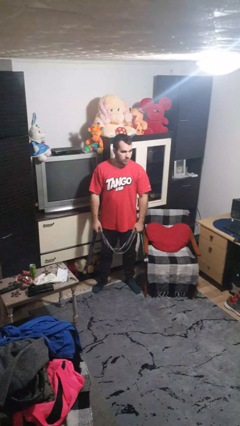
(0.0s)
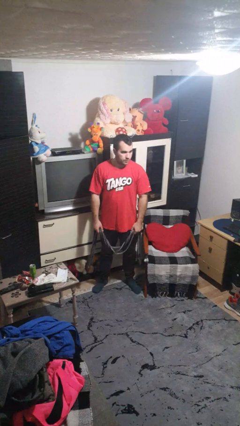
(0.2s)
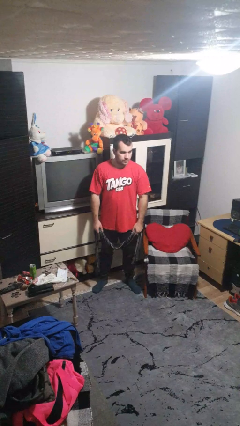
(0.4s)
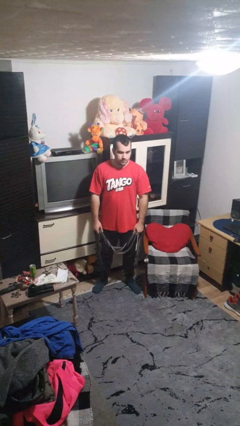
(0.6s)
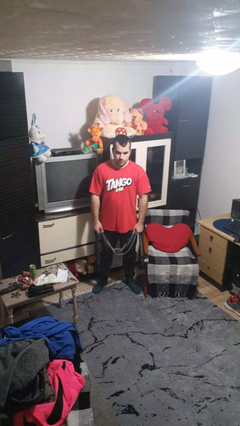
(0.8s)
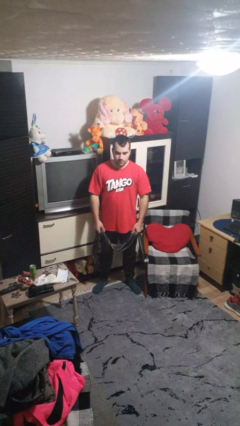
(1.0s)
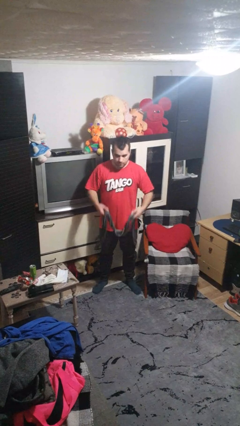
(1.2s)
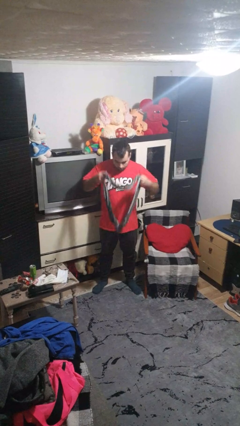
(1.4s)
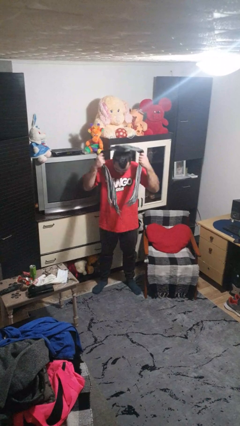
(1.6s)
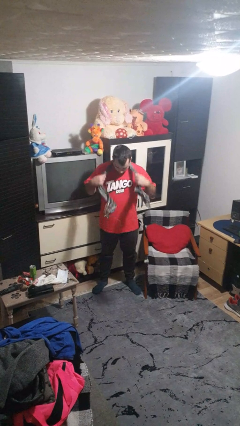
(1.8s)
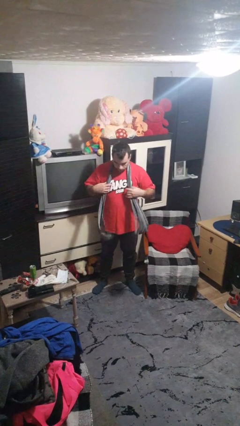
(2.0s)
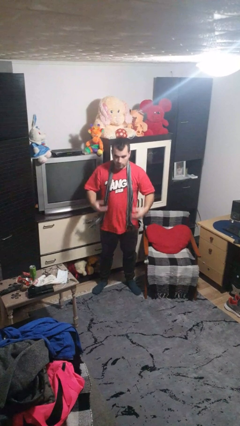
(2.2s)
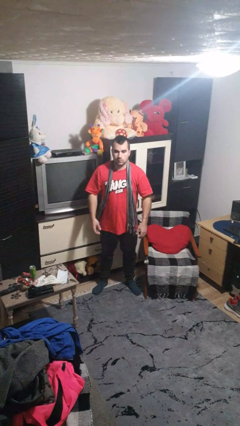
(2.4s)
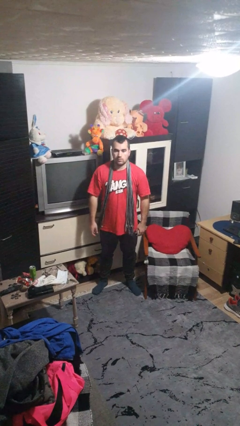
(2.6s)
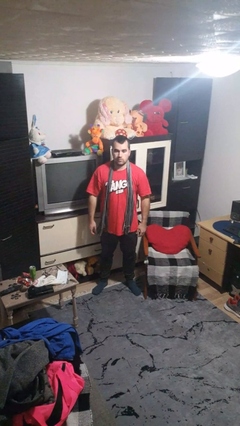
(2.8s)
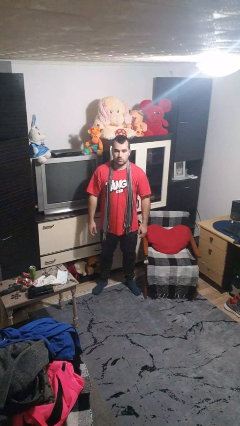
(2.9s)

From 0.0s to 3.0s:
person puts on scarf

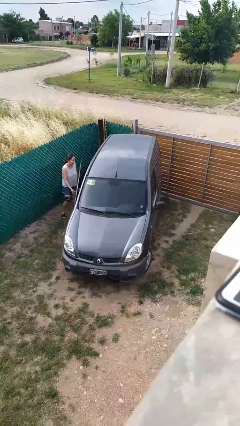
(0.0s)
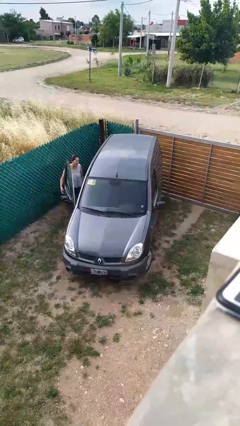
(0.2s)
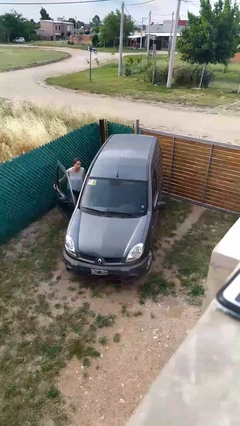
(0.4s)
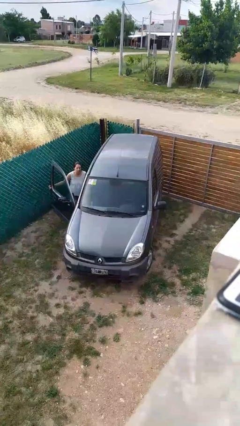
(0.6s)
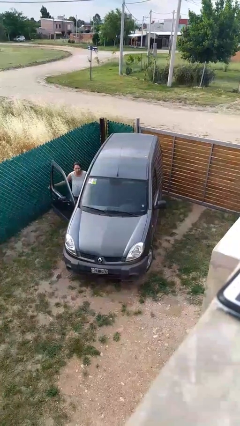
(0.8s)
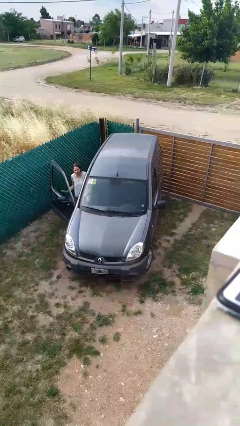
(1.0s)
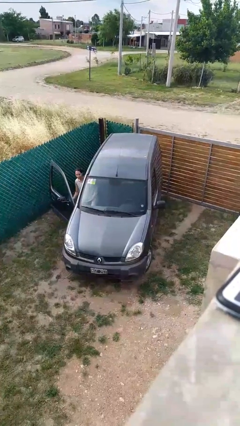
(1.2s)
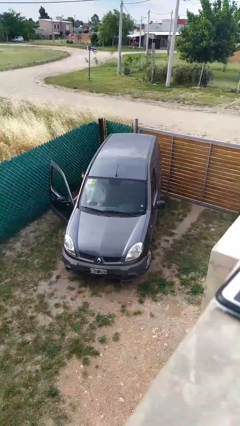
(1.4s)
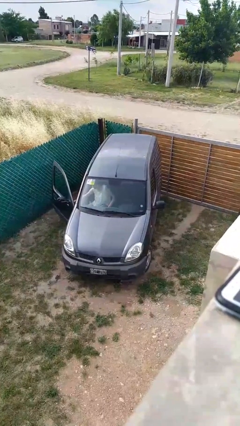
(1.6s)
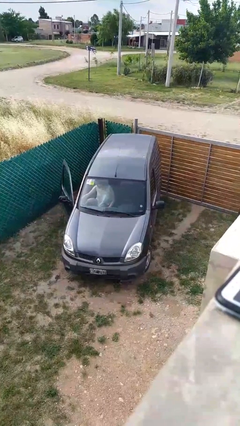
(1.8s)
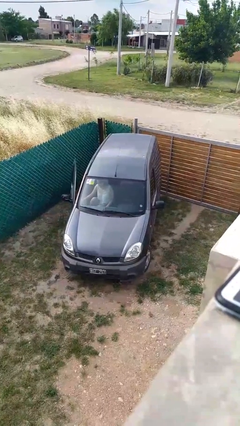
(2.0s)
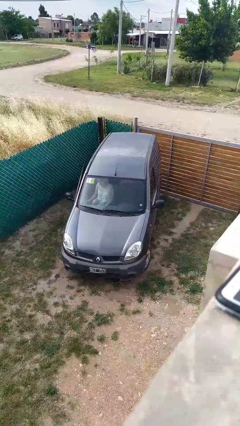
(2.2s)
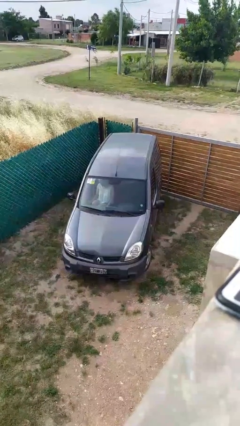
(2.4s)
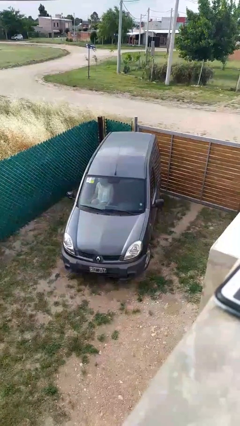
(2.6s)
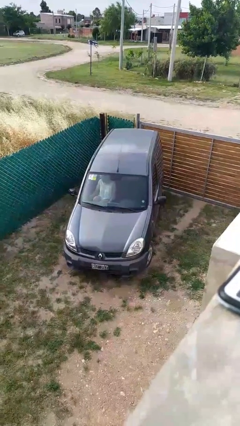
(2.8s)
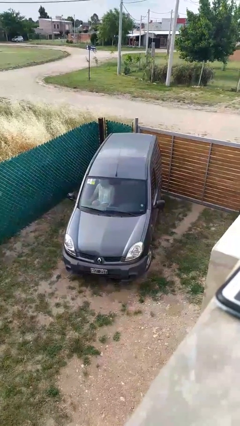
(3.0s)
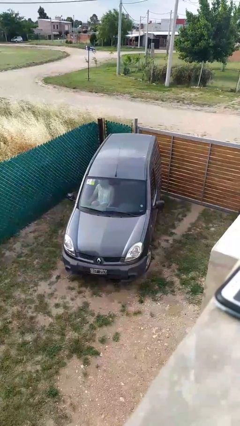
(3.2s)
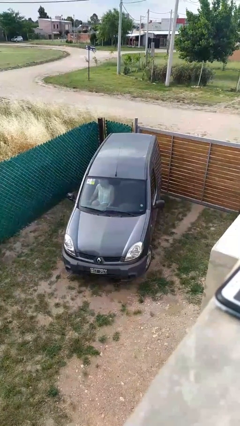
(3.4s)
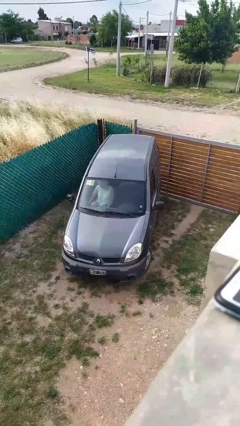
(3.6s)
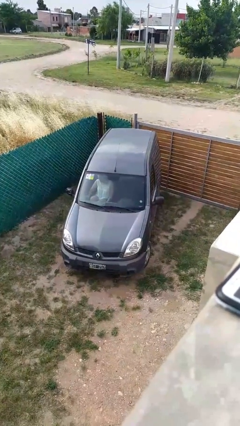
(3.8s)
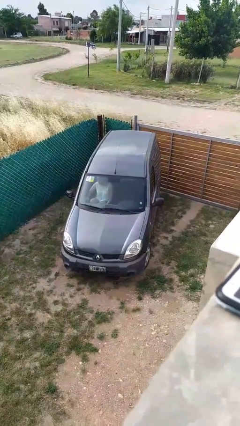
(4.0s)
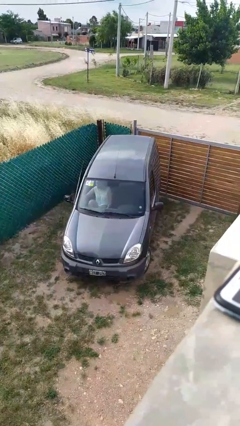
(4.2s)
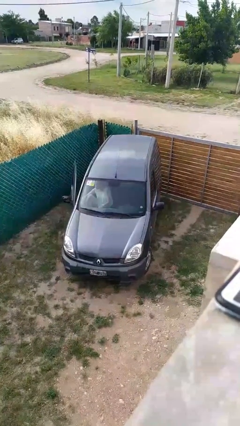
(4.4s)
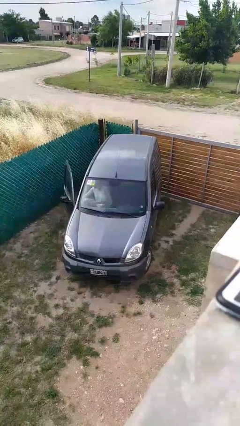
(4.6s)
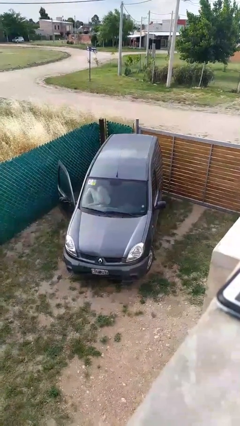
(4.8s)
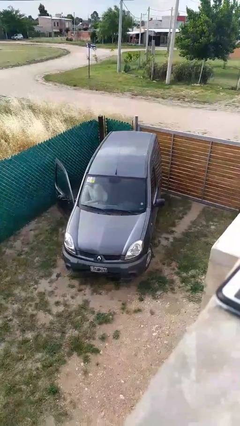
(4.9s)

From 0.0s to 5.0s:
car picks up person

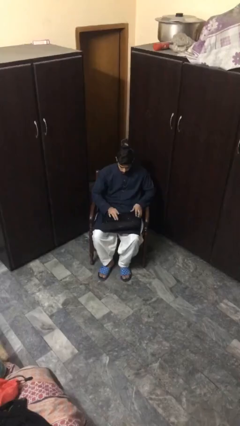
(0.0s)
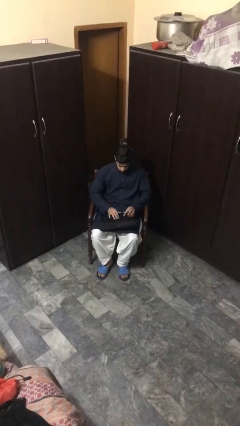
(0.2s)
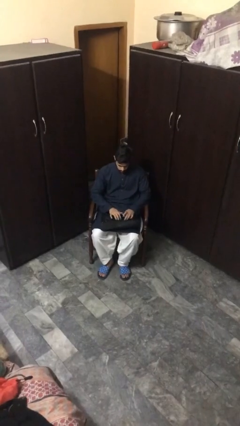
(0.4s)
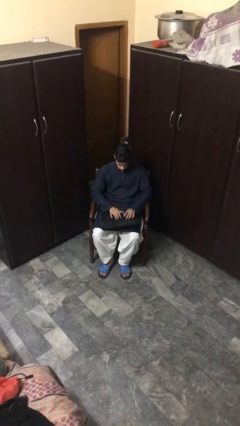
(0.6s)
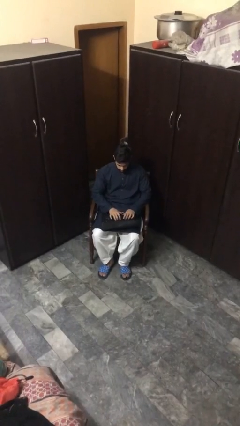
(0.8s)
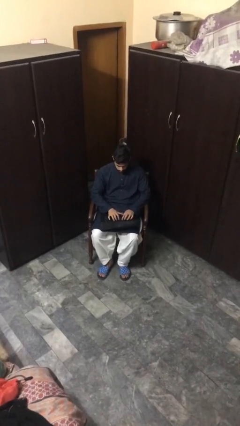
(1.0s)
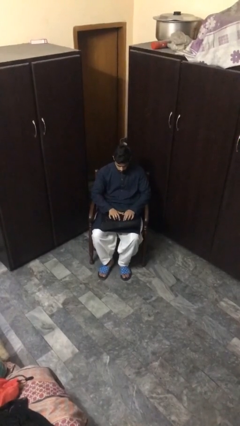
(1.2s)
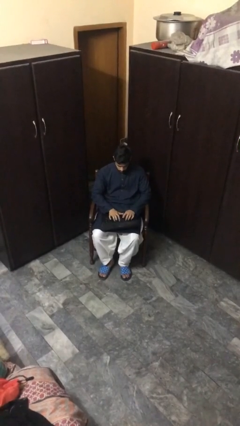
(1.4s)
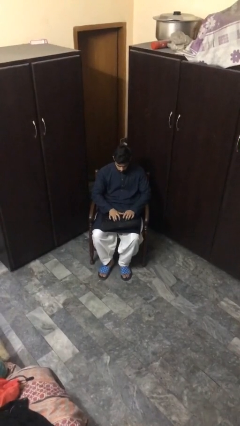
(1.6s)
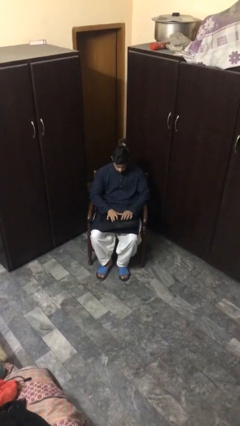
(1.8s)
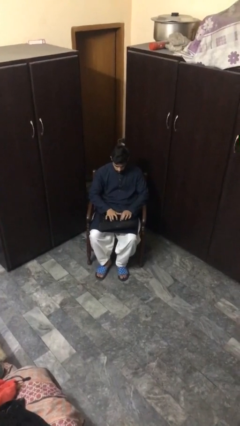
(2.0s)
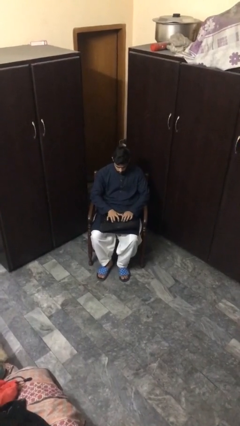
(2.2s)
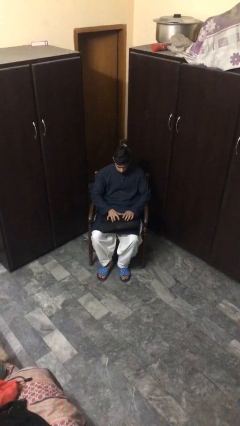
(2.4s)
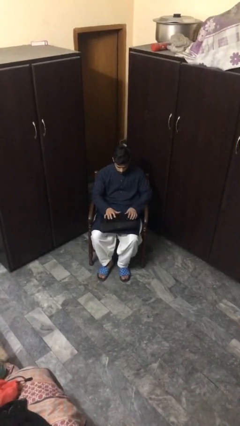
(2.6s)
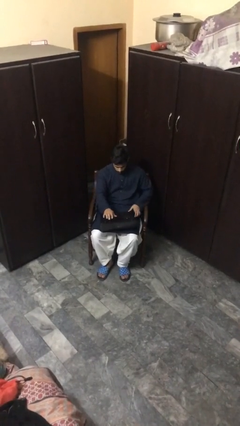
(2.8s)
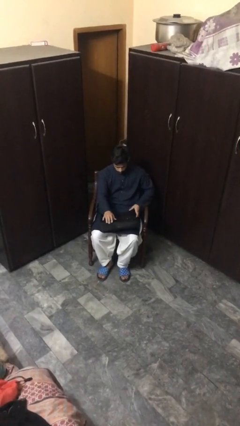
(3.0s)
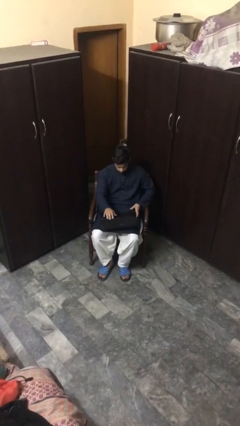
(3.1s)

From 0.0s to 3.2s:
person interacts with laptop

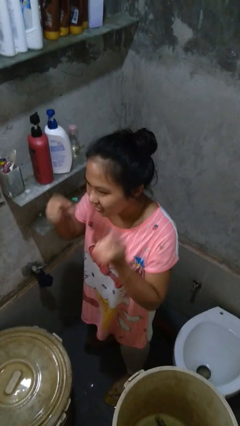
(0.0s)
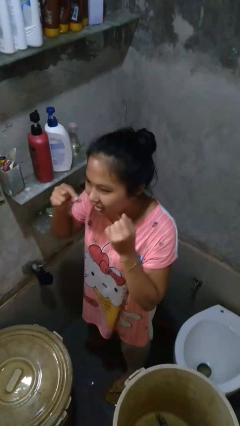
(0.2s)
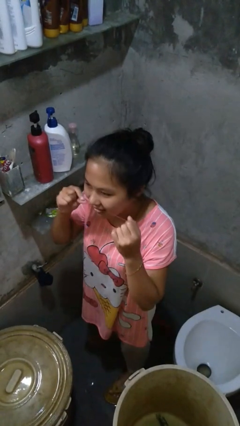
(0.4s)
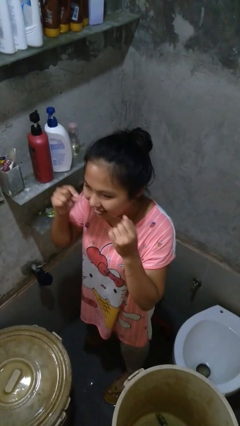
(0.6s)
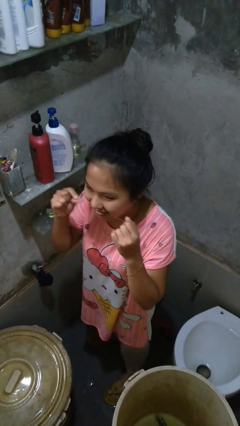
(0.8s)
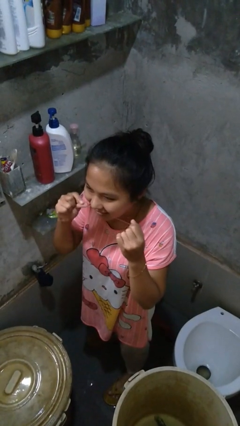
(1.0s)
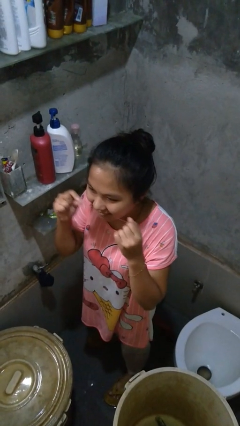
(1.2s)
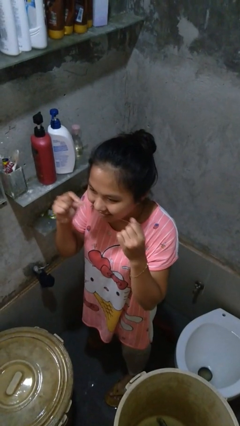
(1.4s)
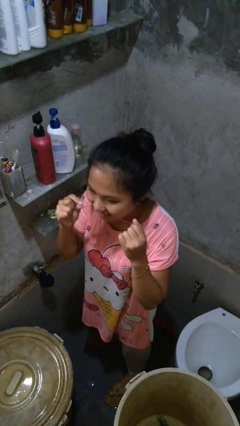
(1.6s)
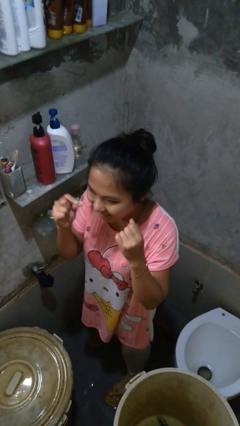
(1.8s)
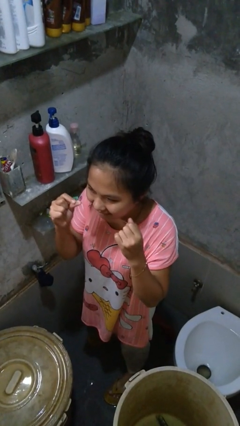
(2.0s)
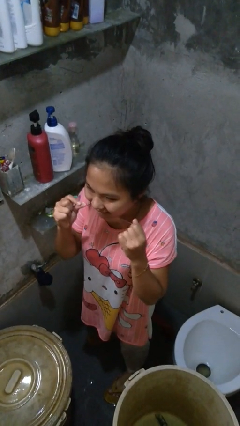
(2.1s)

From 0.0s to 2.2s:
person flosses

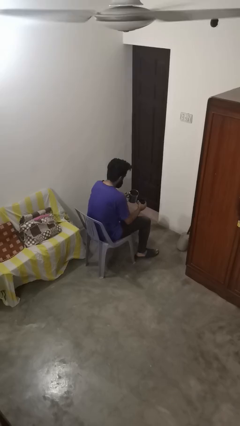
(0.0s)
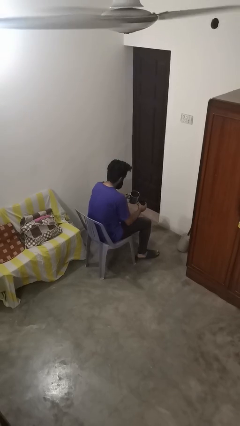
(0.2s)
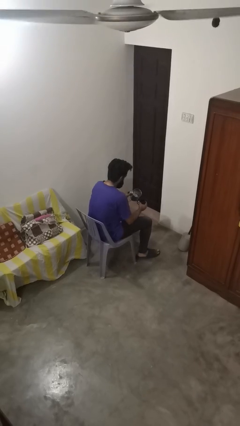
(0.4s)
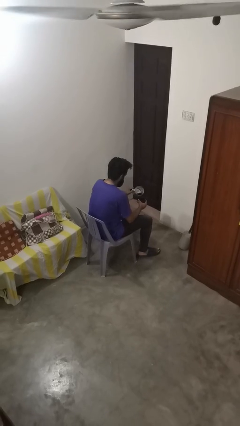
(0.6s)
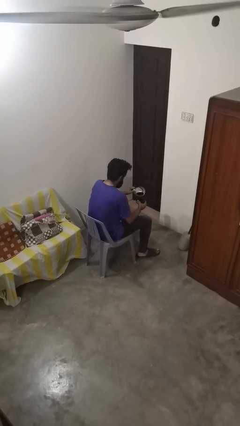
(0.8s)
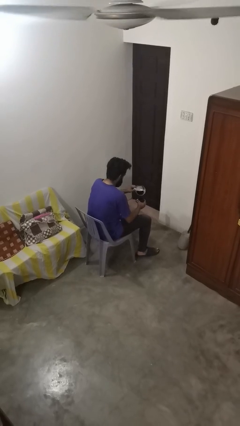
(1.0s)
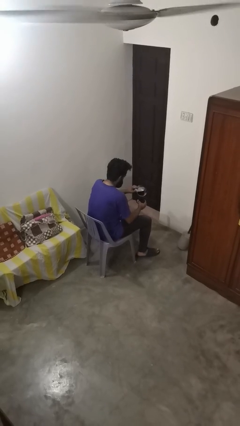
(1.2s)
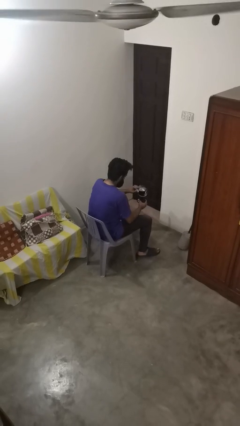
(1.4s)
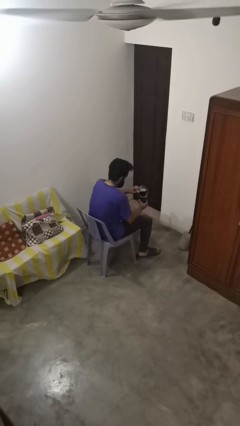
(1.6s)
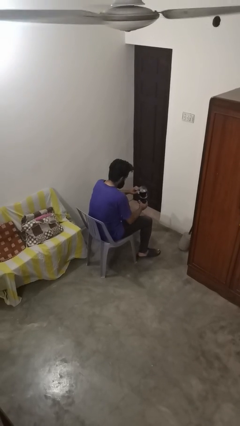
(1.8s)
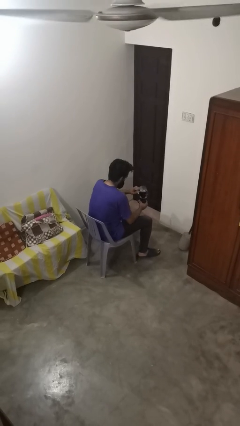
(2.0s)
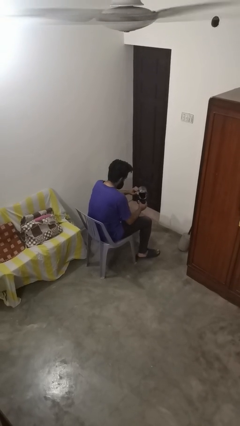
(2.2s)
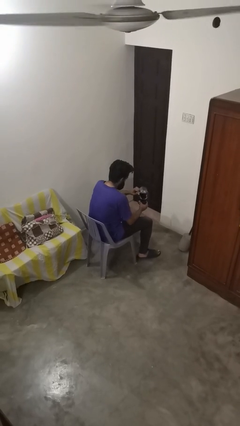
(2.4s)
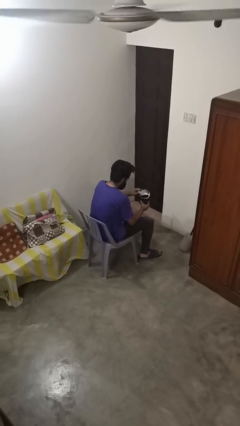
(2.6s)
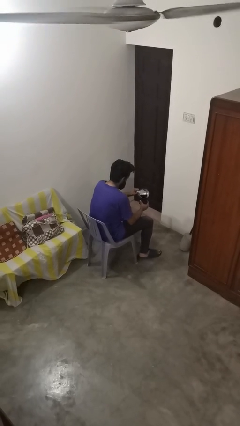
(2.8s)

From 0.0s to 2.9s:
person pours coffee into mug

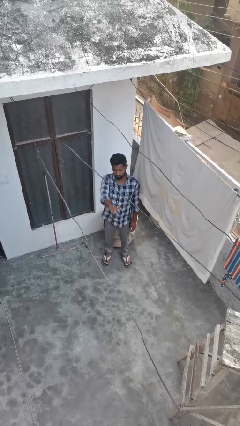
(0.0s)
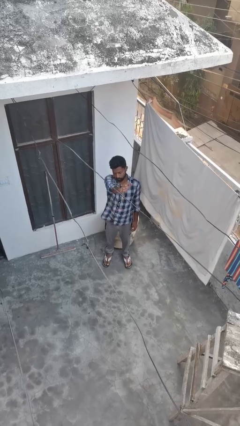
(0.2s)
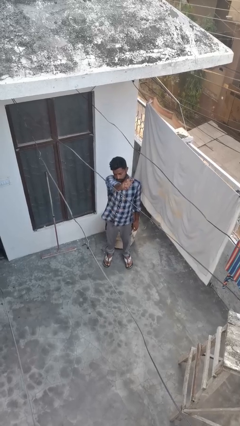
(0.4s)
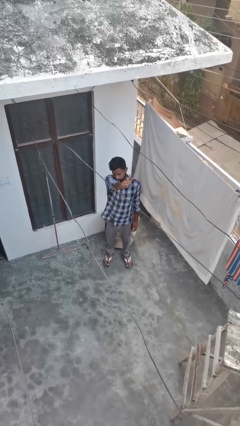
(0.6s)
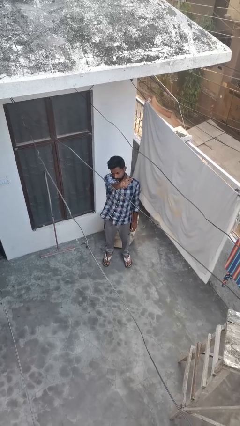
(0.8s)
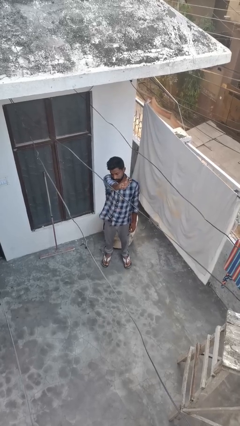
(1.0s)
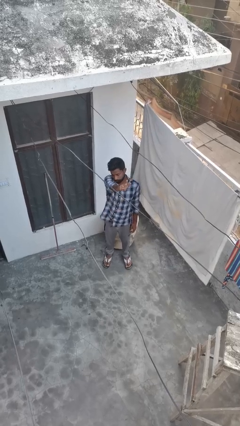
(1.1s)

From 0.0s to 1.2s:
person gestures number three

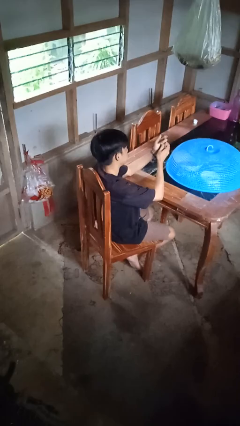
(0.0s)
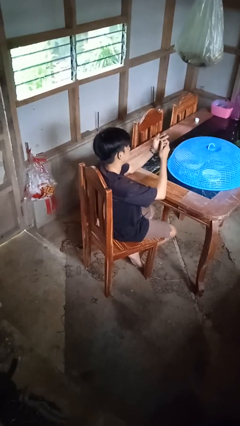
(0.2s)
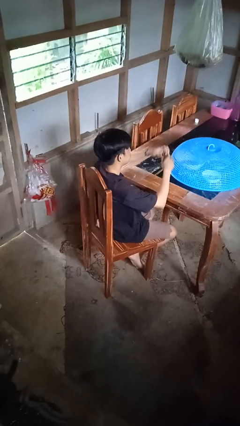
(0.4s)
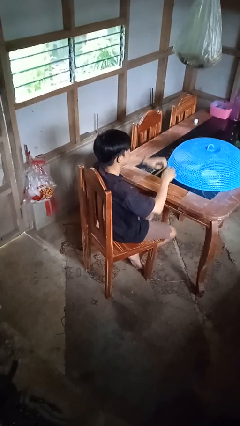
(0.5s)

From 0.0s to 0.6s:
person cracks knuckles
